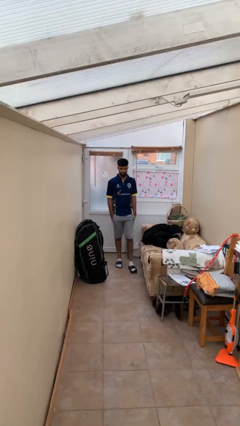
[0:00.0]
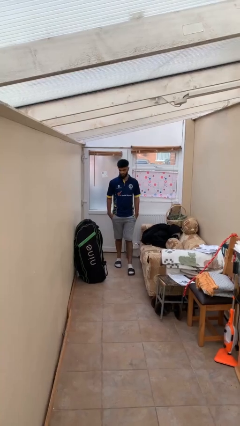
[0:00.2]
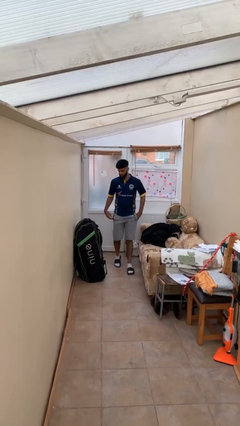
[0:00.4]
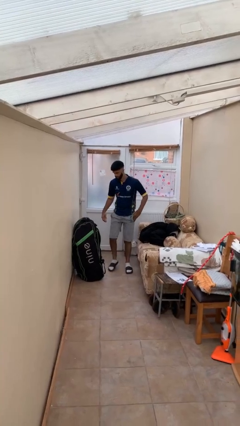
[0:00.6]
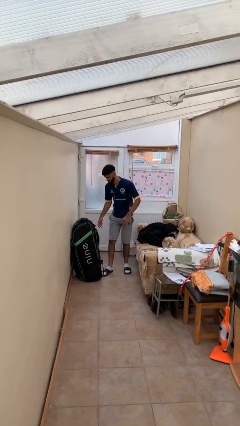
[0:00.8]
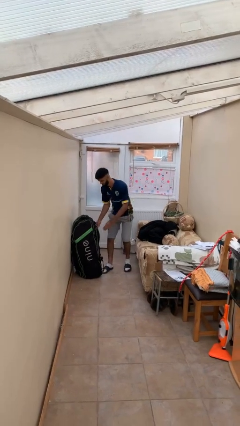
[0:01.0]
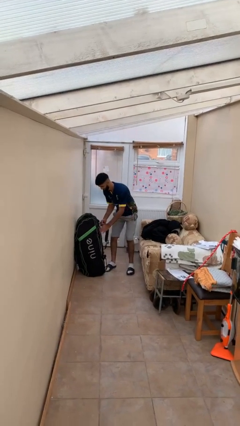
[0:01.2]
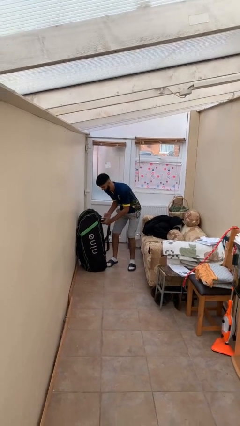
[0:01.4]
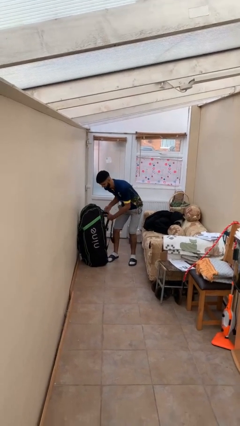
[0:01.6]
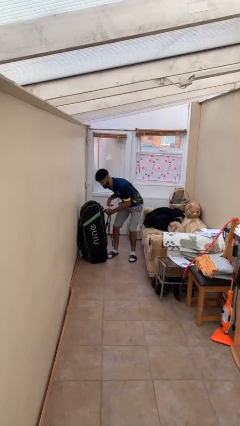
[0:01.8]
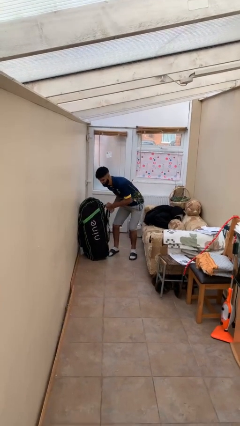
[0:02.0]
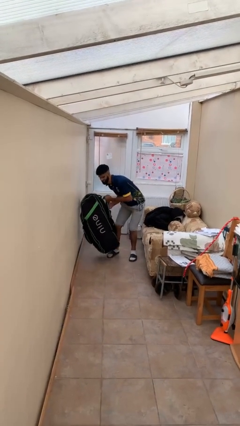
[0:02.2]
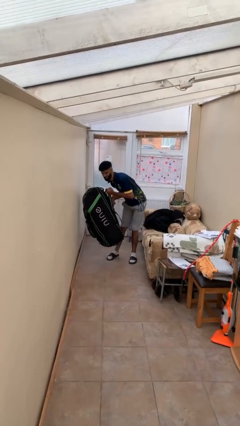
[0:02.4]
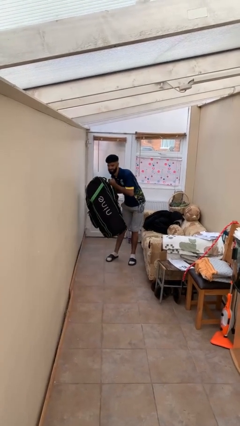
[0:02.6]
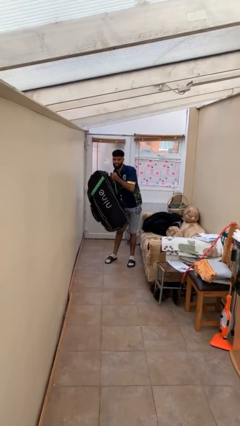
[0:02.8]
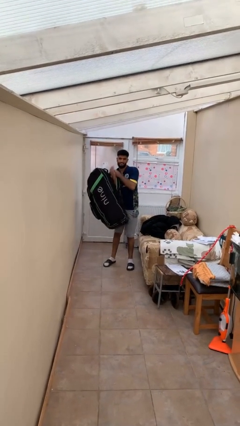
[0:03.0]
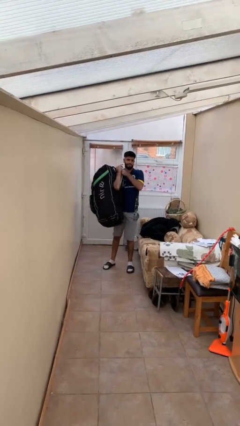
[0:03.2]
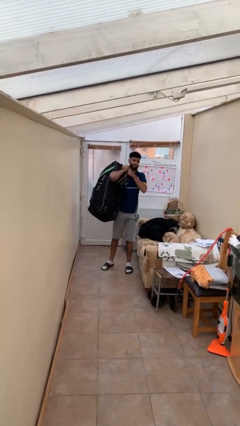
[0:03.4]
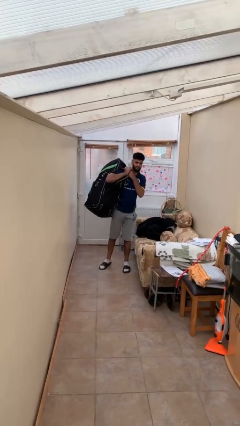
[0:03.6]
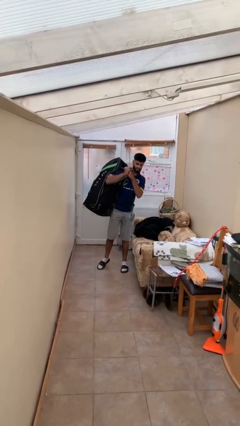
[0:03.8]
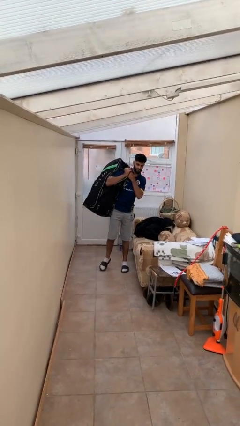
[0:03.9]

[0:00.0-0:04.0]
person picks up object from floor

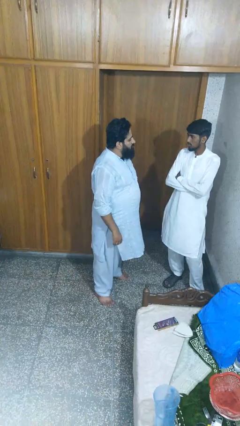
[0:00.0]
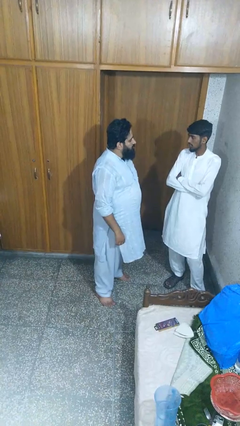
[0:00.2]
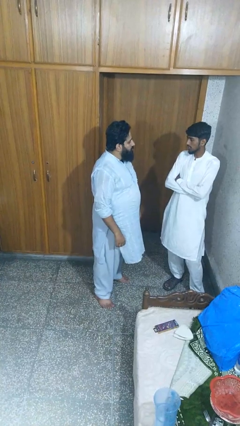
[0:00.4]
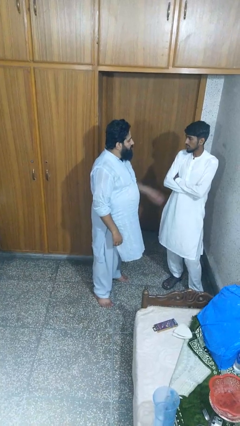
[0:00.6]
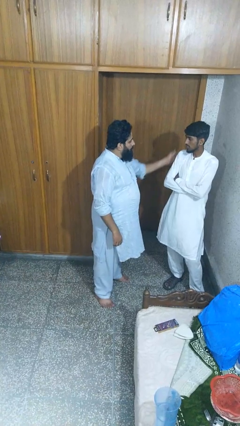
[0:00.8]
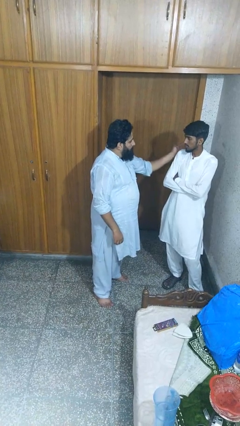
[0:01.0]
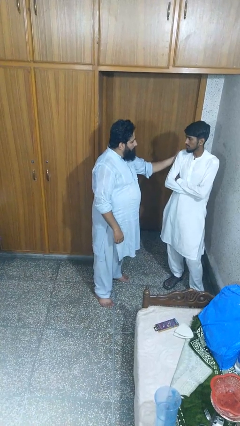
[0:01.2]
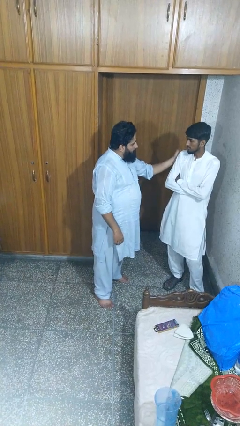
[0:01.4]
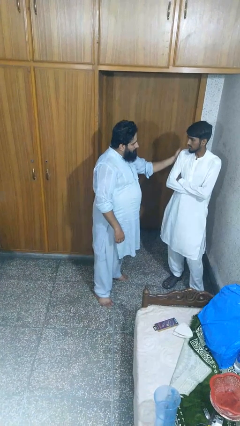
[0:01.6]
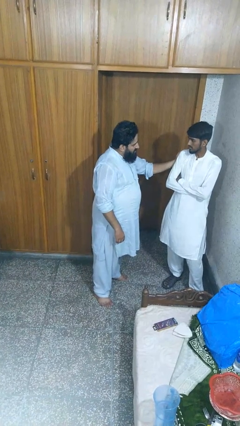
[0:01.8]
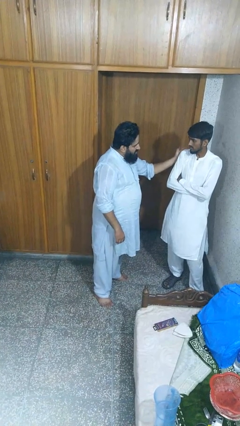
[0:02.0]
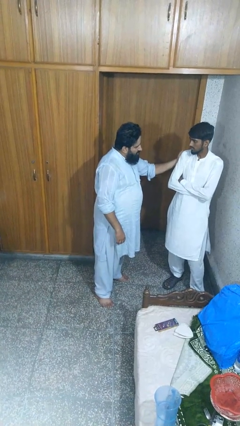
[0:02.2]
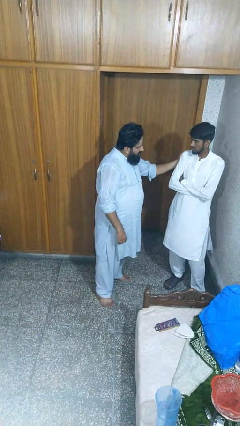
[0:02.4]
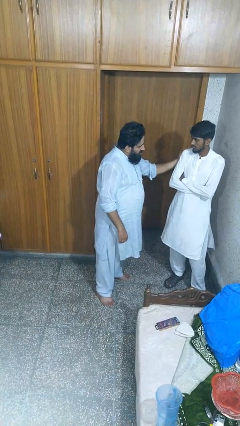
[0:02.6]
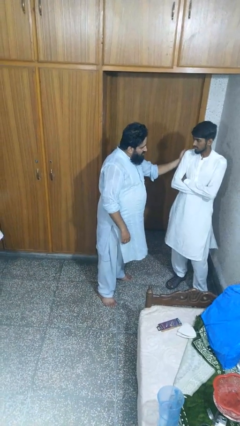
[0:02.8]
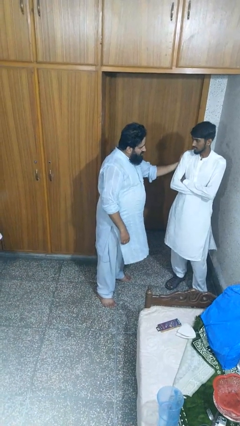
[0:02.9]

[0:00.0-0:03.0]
person pounds shoulders of person

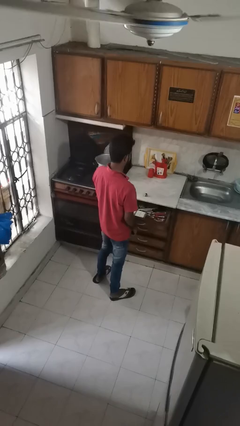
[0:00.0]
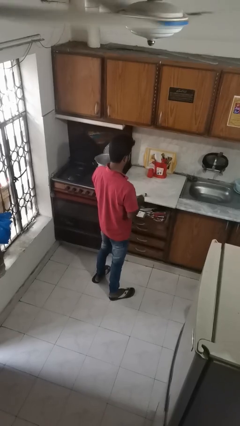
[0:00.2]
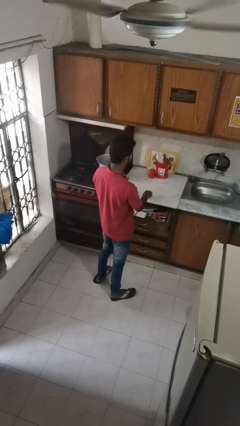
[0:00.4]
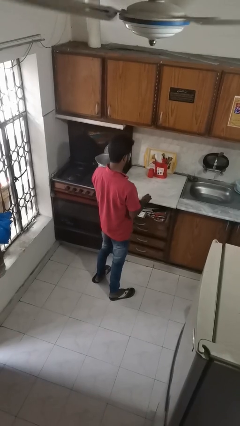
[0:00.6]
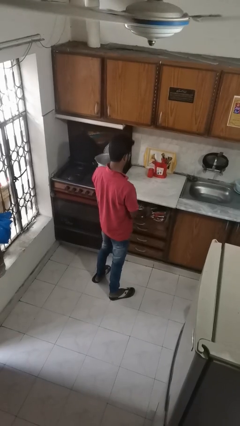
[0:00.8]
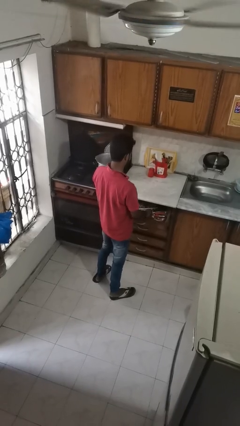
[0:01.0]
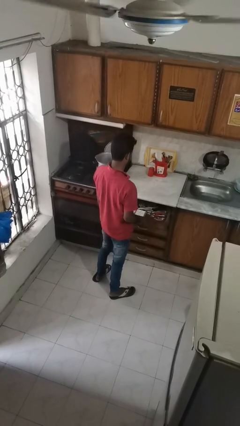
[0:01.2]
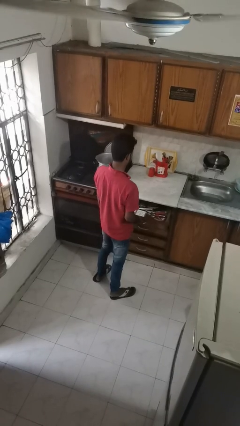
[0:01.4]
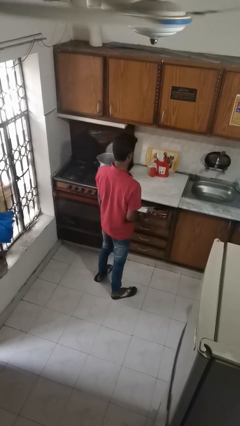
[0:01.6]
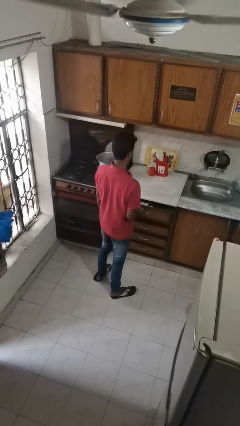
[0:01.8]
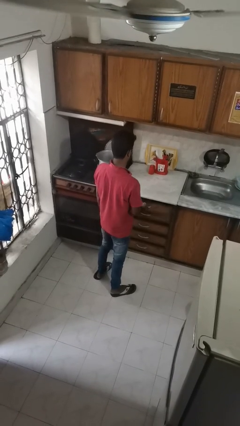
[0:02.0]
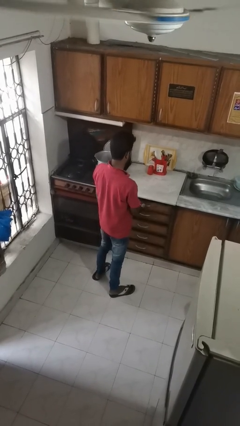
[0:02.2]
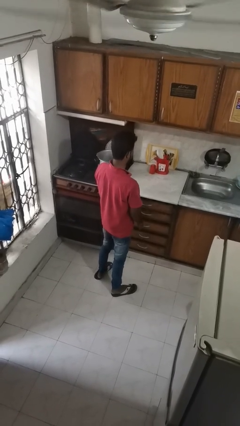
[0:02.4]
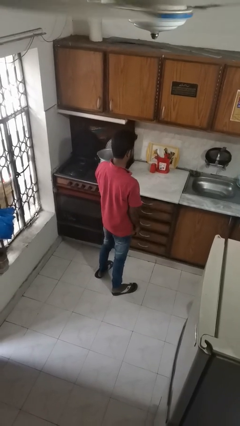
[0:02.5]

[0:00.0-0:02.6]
person puts object into kitchen drawer

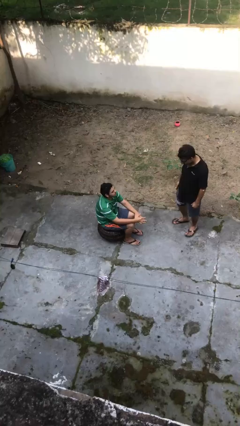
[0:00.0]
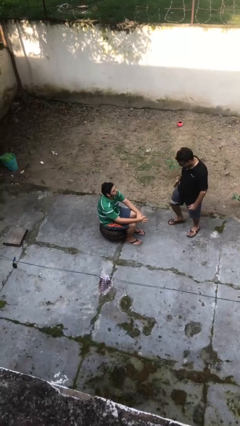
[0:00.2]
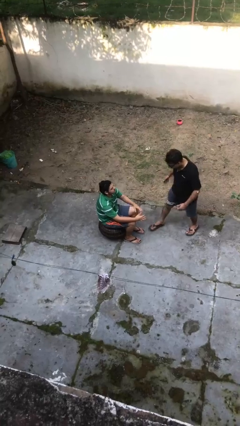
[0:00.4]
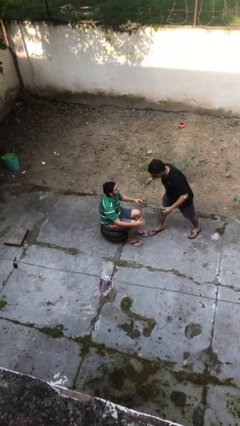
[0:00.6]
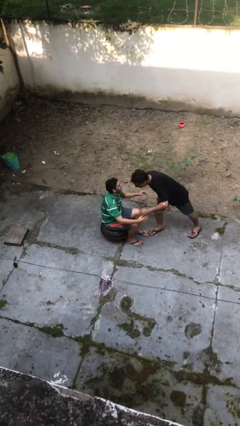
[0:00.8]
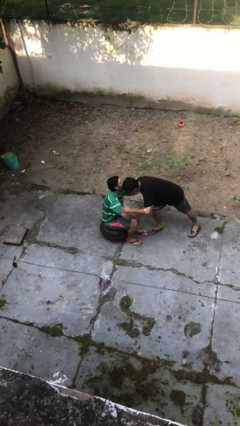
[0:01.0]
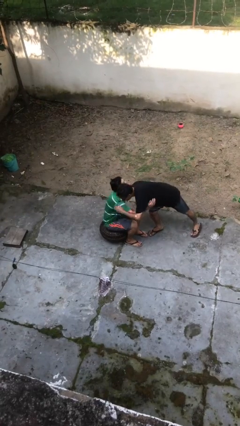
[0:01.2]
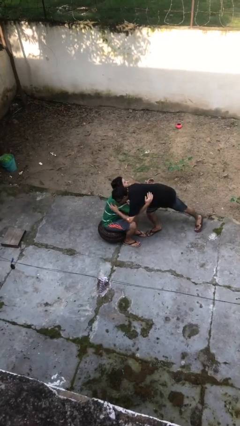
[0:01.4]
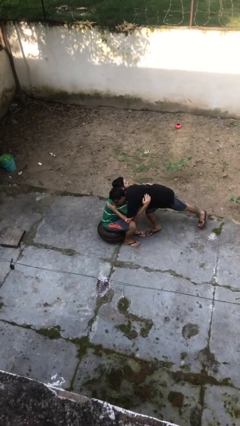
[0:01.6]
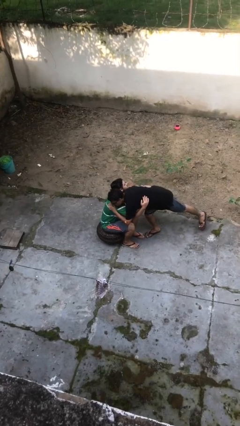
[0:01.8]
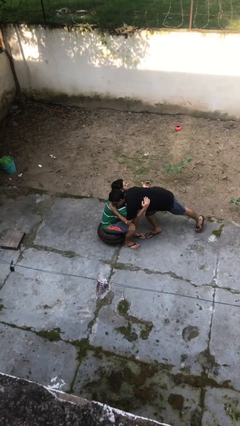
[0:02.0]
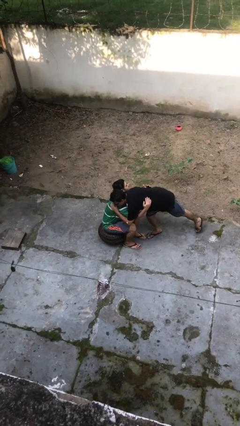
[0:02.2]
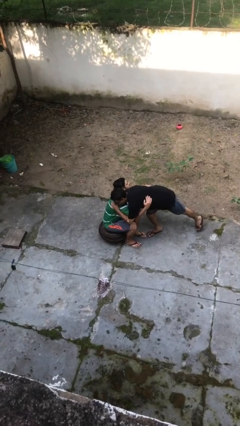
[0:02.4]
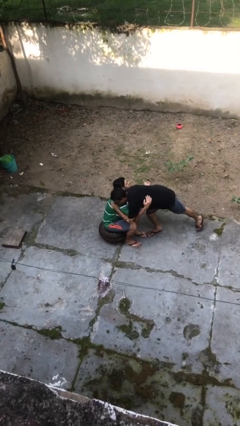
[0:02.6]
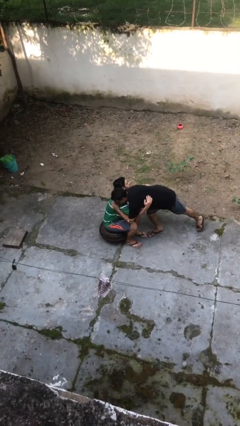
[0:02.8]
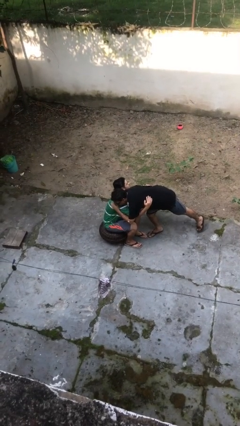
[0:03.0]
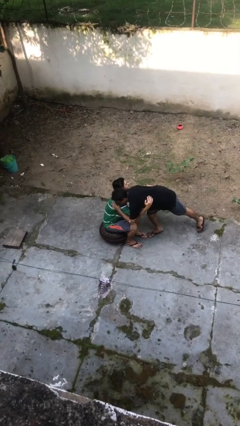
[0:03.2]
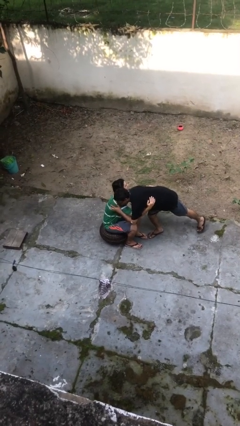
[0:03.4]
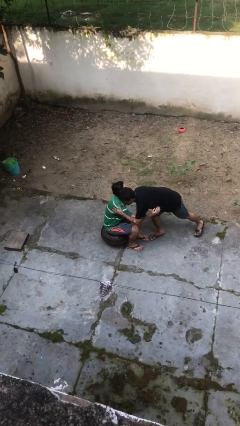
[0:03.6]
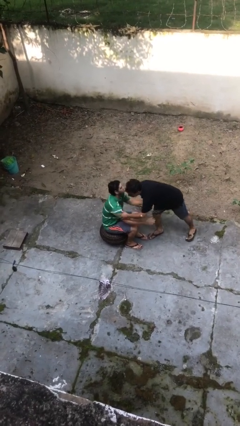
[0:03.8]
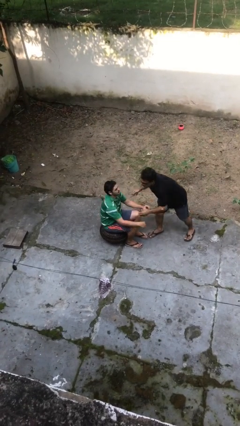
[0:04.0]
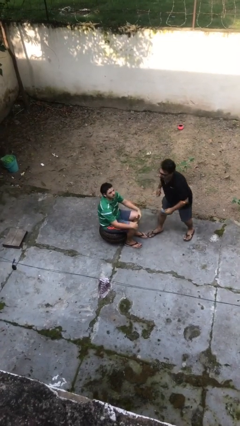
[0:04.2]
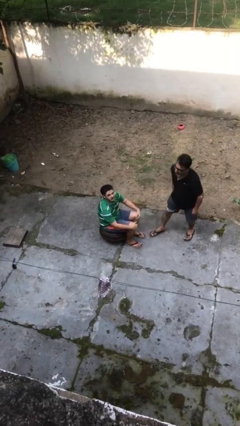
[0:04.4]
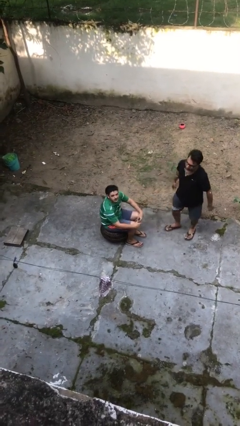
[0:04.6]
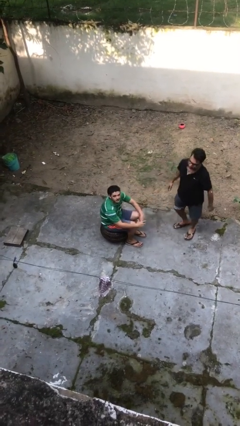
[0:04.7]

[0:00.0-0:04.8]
person embraces person

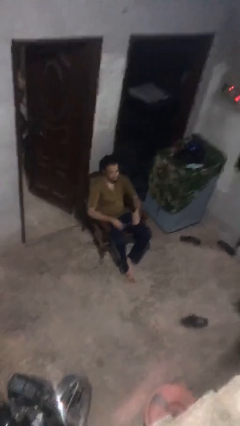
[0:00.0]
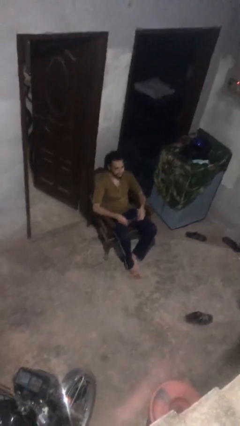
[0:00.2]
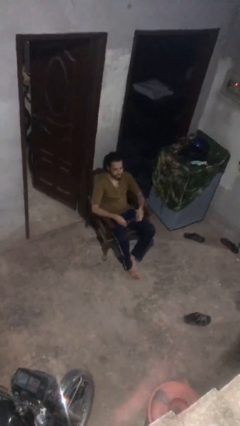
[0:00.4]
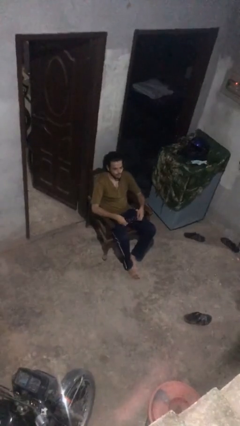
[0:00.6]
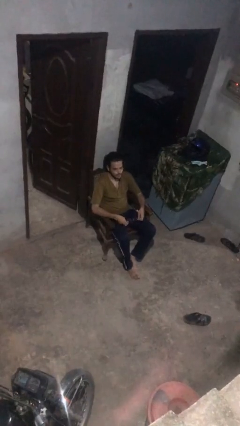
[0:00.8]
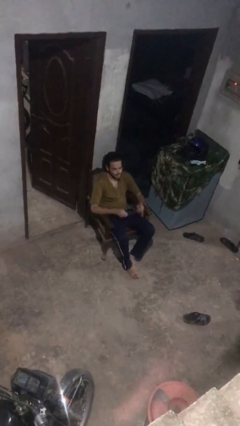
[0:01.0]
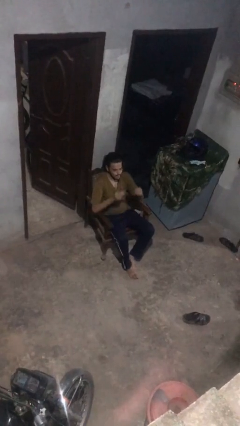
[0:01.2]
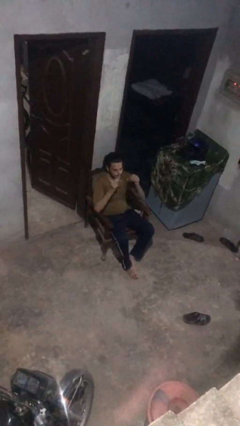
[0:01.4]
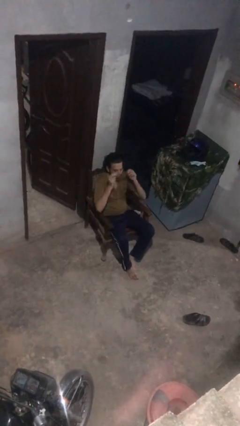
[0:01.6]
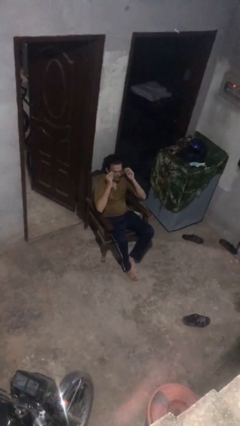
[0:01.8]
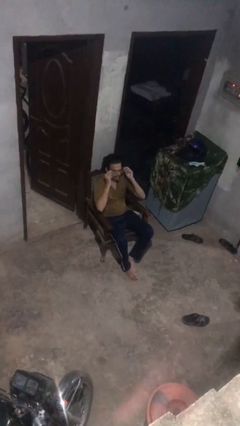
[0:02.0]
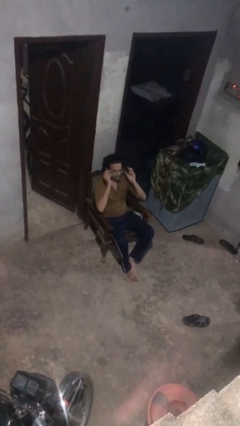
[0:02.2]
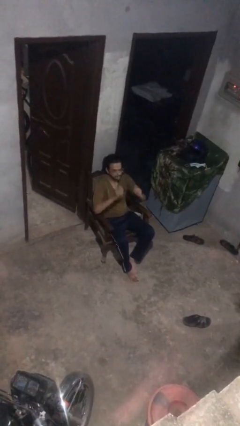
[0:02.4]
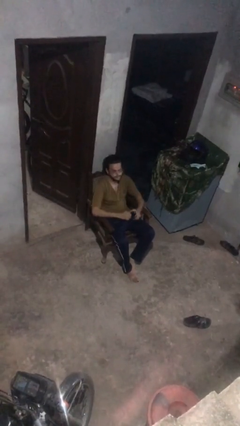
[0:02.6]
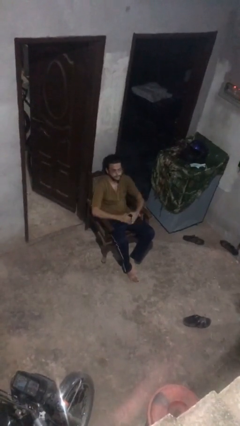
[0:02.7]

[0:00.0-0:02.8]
person puts on glasses

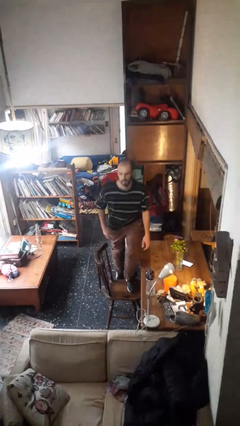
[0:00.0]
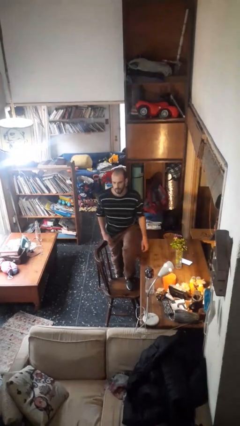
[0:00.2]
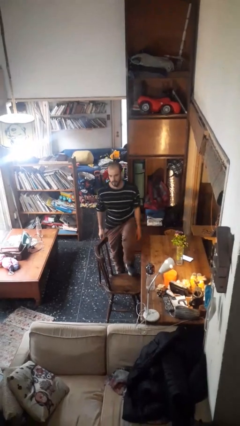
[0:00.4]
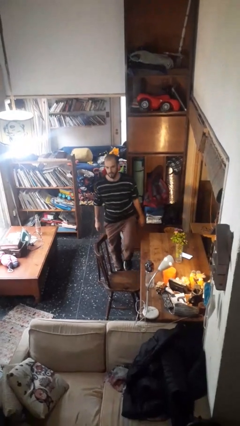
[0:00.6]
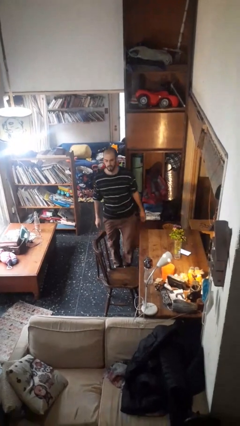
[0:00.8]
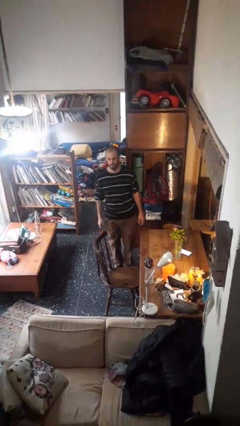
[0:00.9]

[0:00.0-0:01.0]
person climbs off chair
